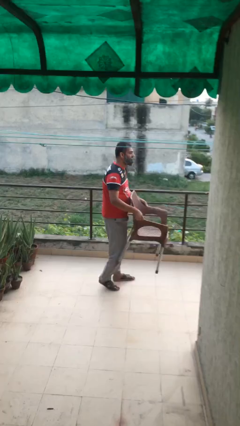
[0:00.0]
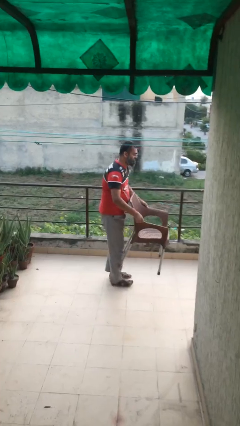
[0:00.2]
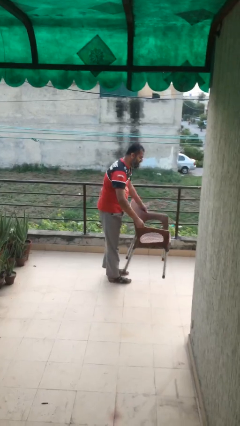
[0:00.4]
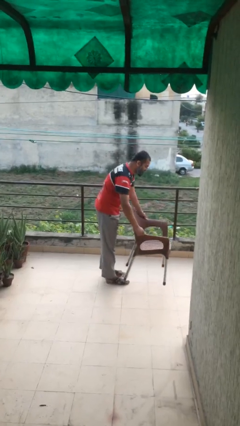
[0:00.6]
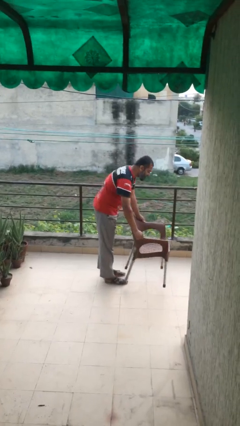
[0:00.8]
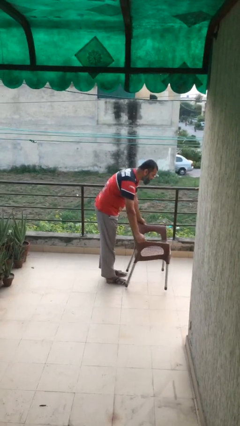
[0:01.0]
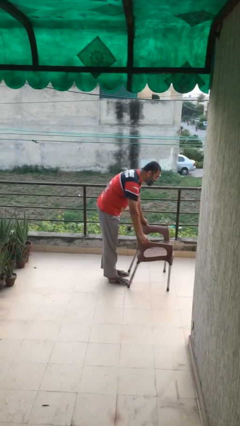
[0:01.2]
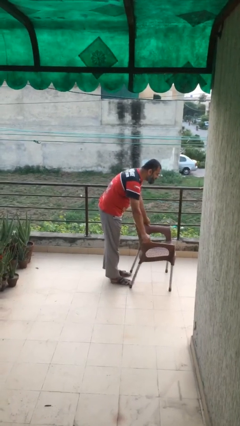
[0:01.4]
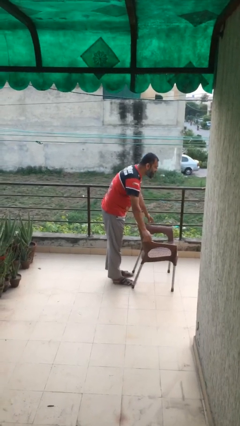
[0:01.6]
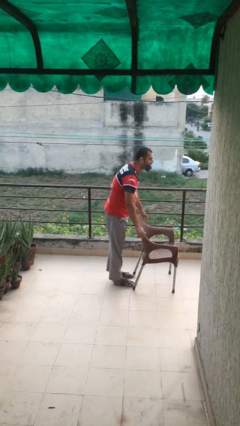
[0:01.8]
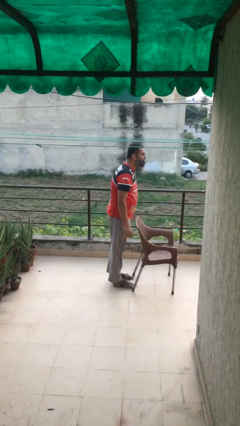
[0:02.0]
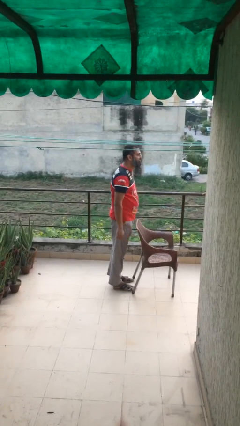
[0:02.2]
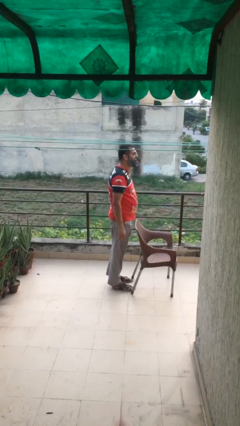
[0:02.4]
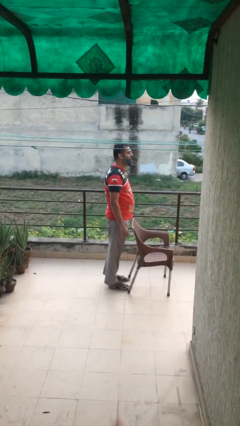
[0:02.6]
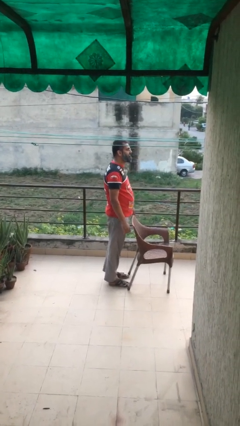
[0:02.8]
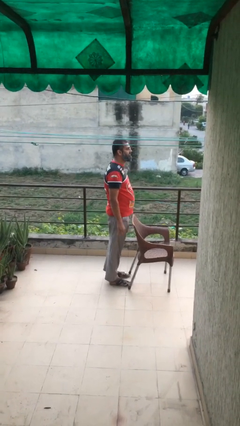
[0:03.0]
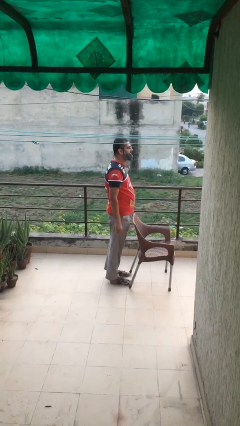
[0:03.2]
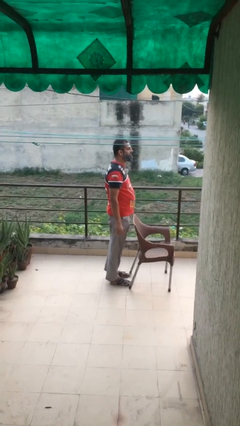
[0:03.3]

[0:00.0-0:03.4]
person puts down object on floor

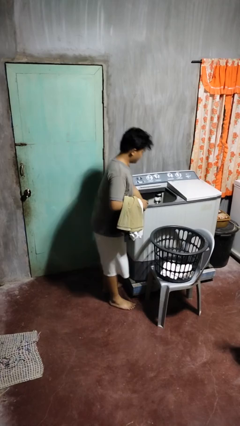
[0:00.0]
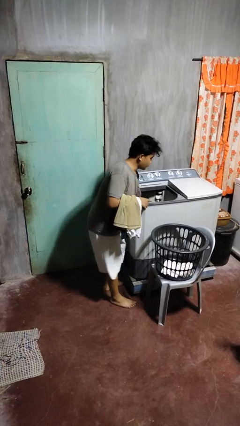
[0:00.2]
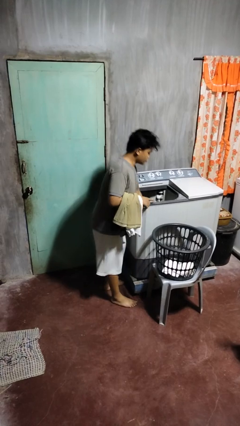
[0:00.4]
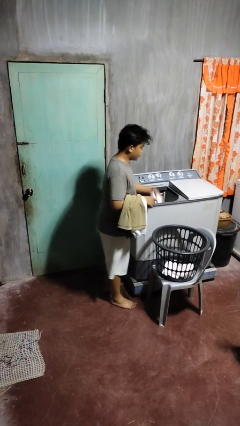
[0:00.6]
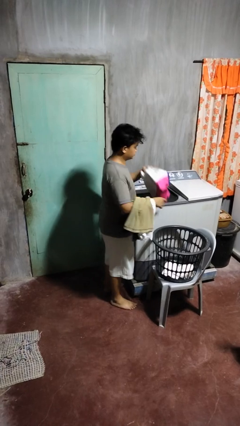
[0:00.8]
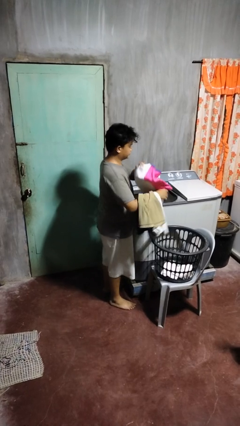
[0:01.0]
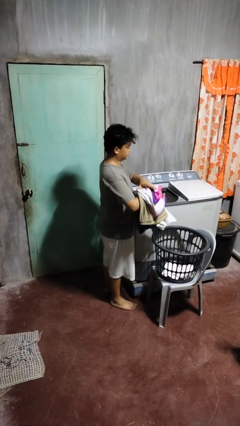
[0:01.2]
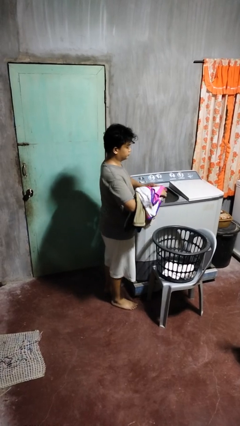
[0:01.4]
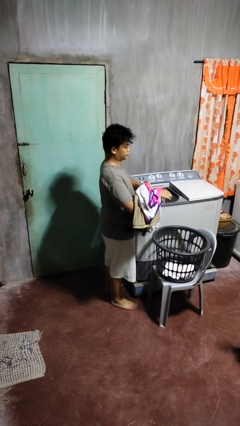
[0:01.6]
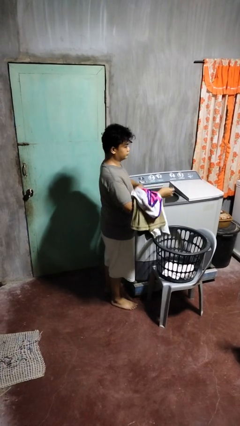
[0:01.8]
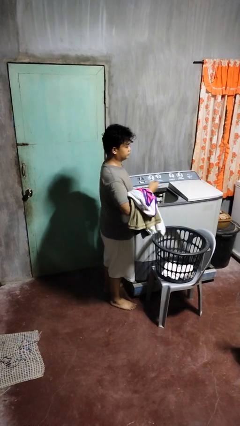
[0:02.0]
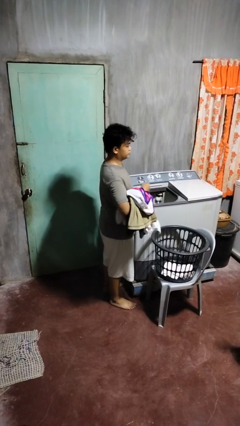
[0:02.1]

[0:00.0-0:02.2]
person unloads clotheswasher

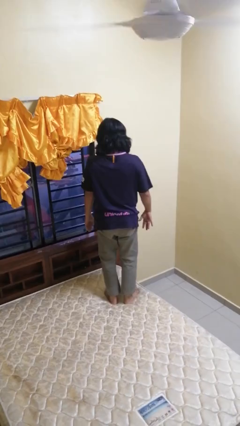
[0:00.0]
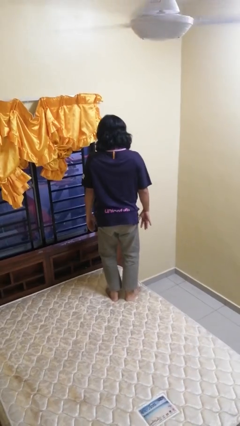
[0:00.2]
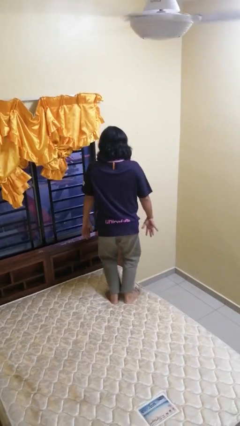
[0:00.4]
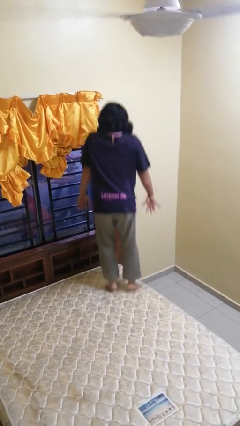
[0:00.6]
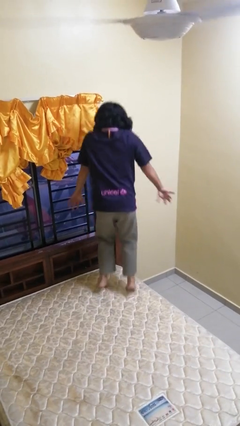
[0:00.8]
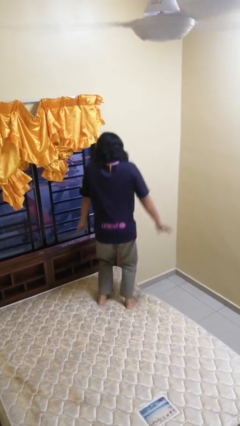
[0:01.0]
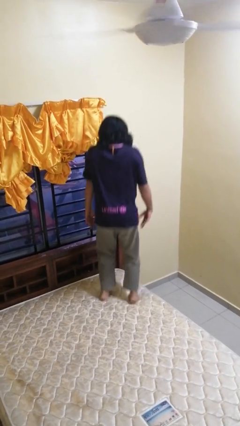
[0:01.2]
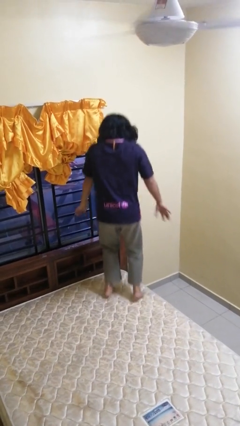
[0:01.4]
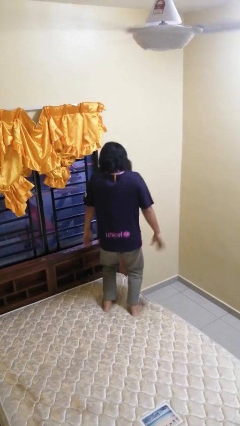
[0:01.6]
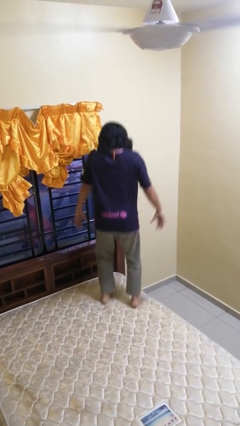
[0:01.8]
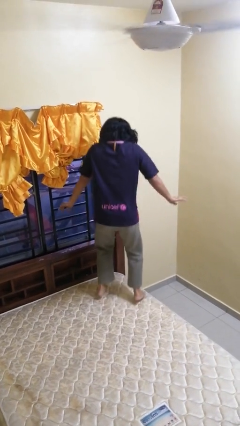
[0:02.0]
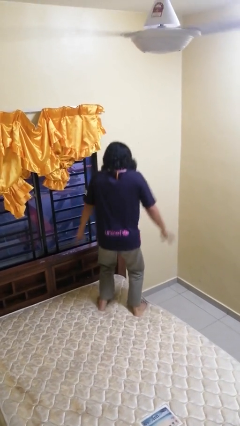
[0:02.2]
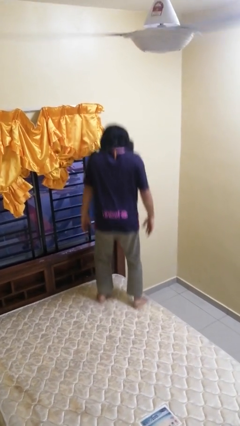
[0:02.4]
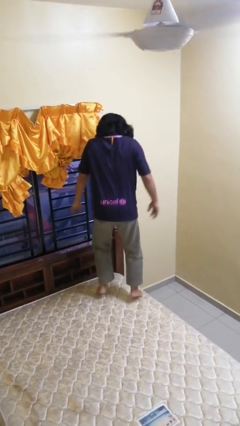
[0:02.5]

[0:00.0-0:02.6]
person jumps on bed

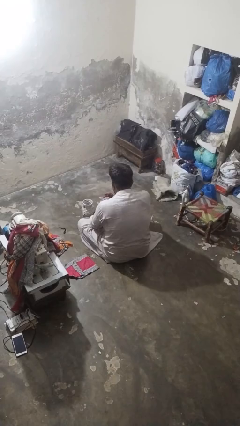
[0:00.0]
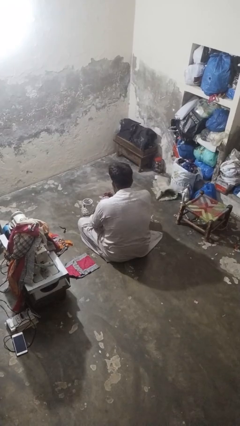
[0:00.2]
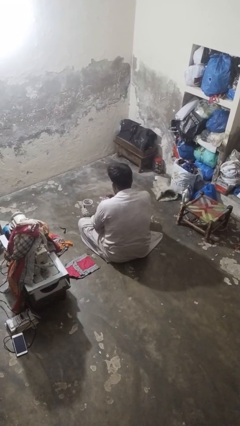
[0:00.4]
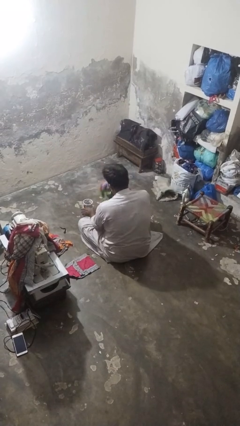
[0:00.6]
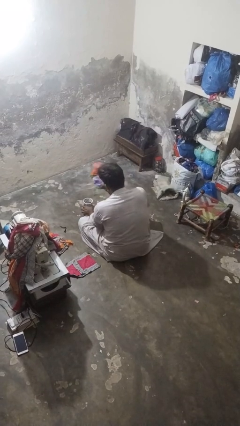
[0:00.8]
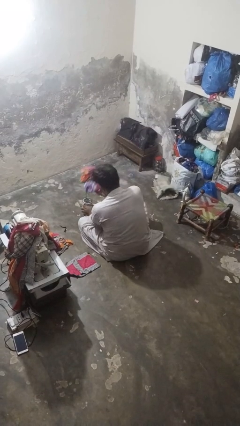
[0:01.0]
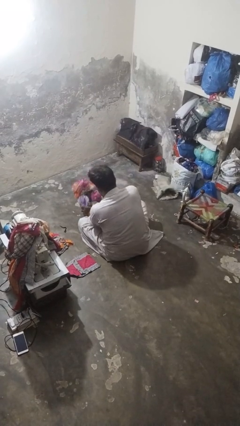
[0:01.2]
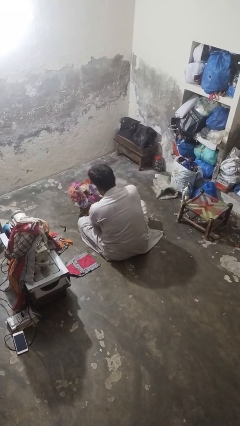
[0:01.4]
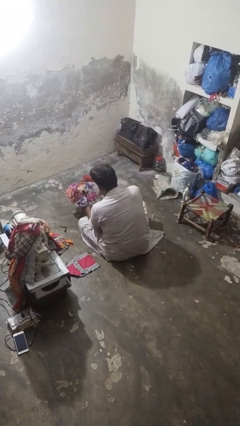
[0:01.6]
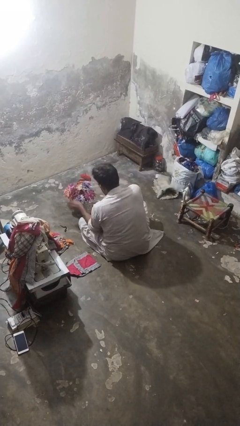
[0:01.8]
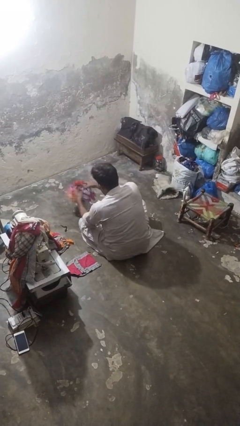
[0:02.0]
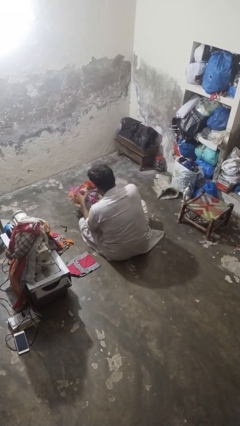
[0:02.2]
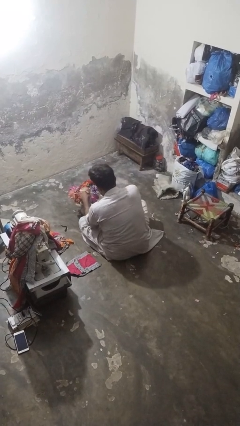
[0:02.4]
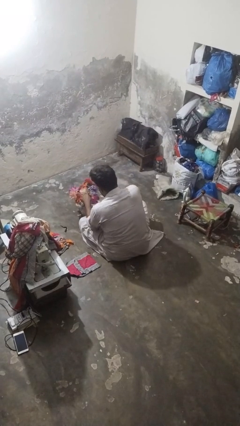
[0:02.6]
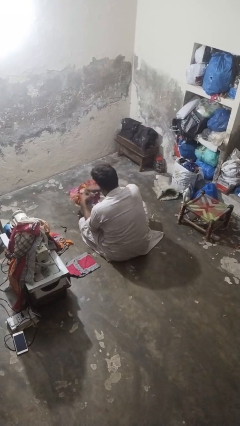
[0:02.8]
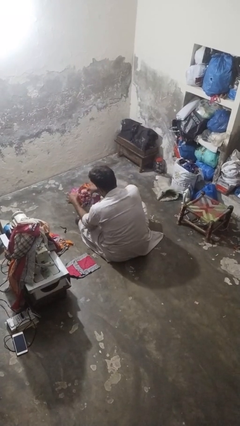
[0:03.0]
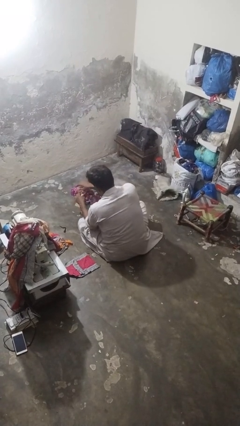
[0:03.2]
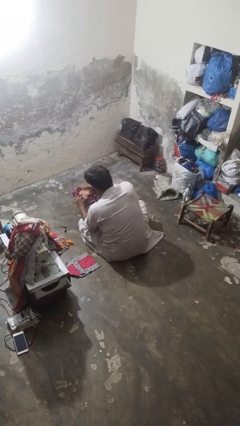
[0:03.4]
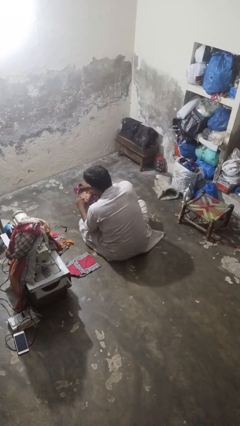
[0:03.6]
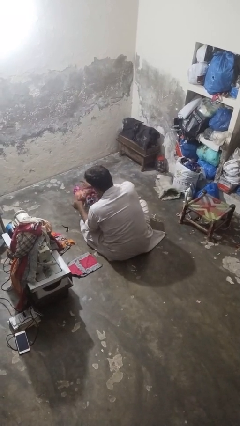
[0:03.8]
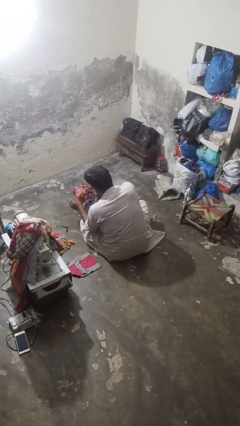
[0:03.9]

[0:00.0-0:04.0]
person arranges flowers in vase

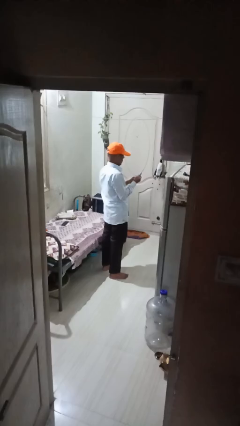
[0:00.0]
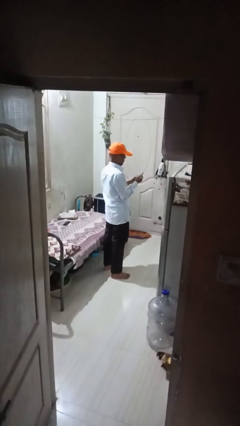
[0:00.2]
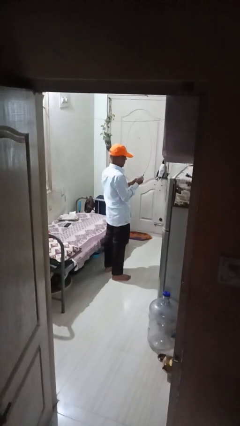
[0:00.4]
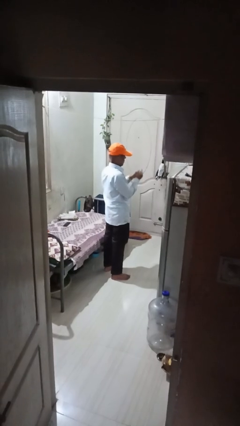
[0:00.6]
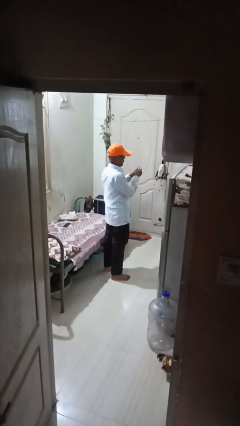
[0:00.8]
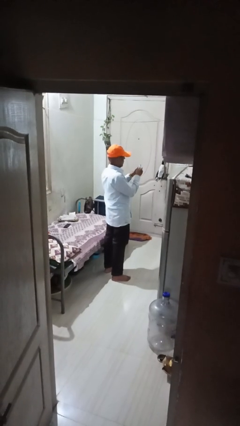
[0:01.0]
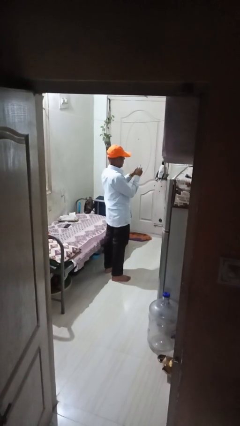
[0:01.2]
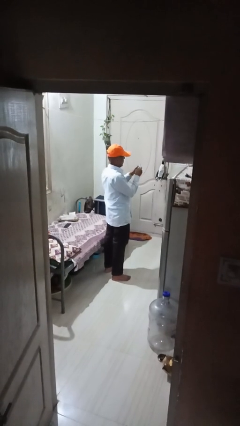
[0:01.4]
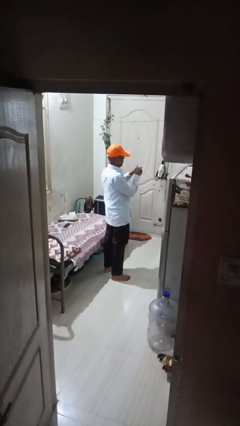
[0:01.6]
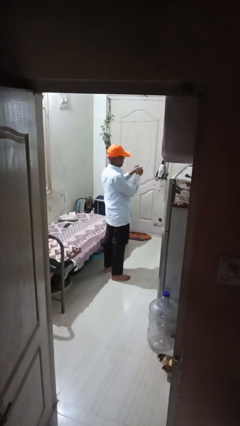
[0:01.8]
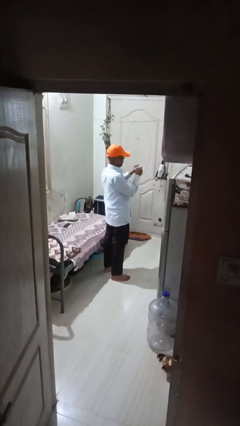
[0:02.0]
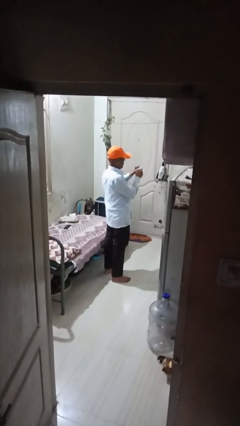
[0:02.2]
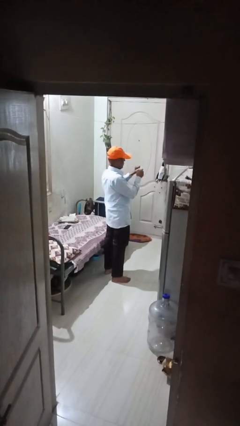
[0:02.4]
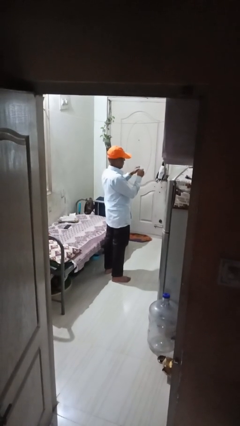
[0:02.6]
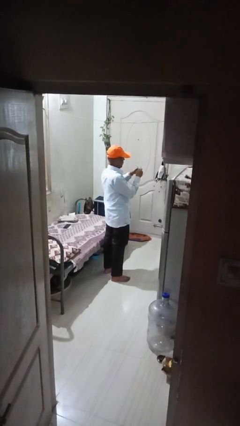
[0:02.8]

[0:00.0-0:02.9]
person files fingernails

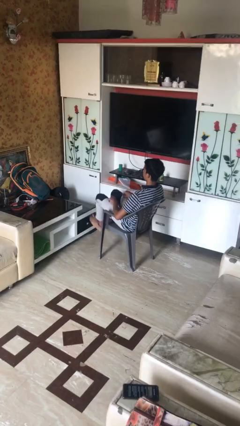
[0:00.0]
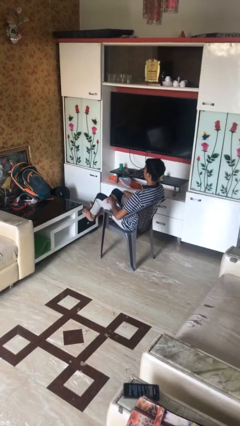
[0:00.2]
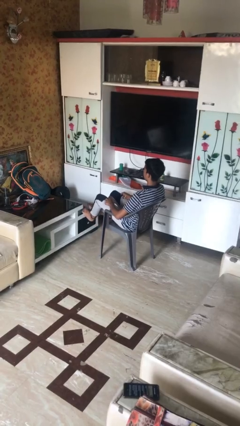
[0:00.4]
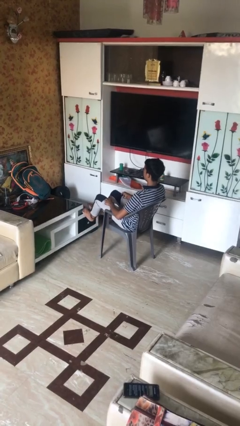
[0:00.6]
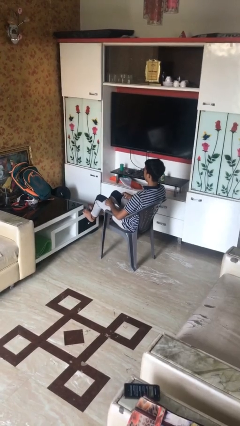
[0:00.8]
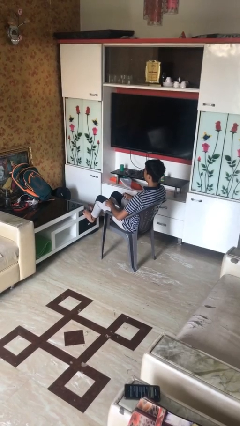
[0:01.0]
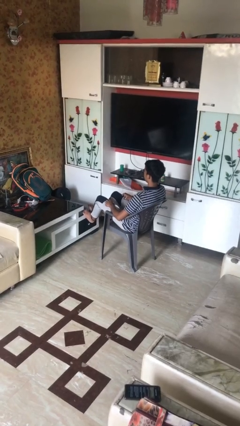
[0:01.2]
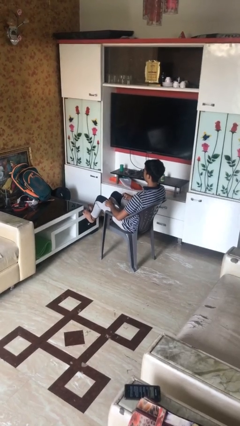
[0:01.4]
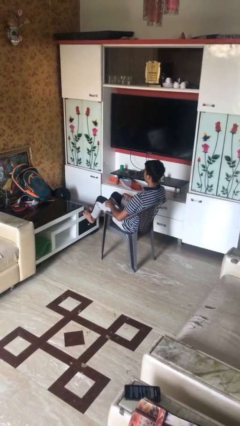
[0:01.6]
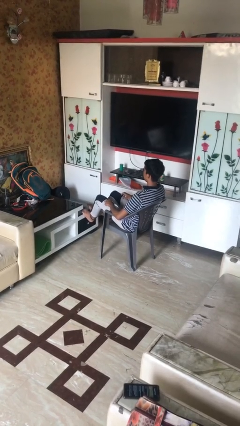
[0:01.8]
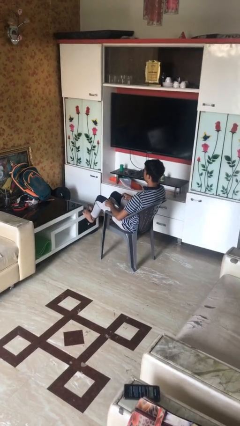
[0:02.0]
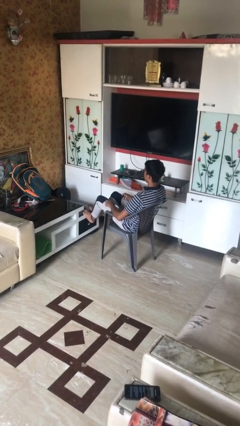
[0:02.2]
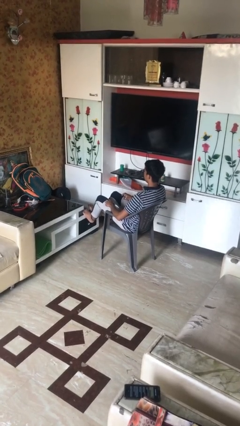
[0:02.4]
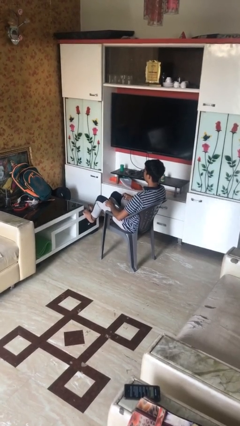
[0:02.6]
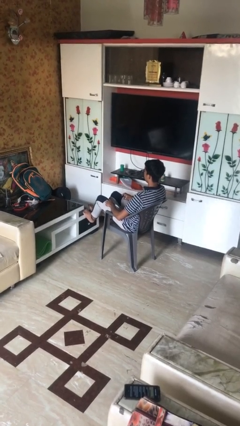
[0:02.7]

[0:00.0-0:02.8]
person puts feet up
